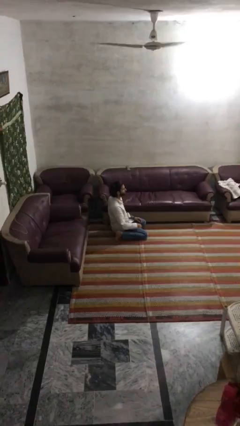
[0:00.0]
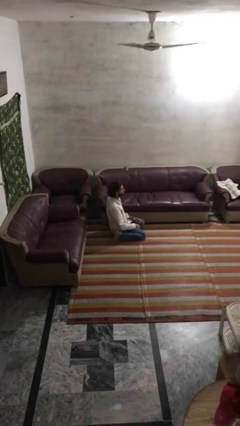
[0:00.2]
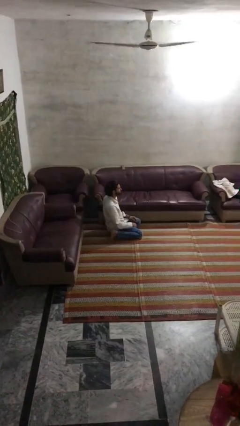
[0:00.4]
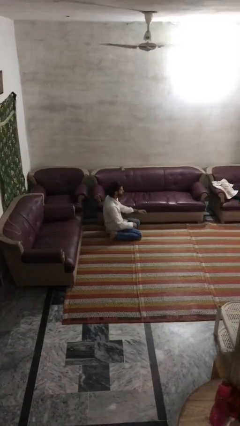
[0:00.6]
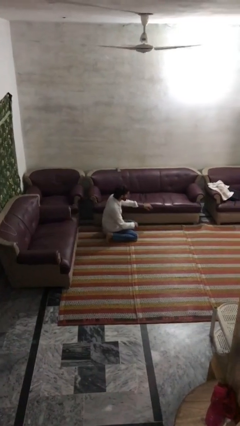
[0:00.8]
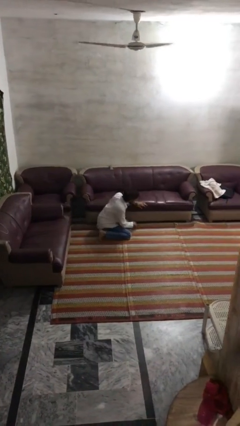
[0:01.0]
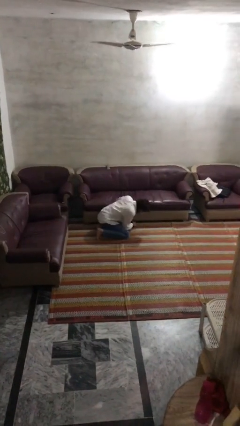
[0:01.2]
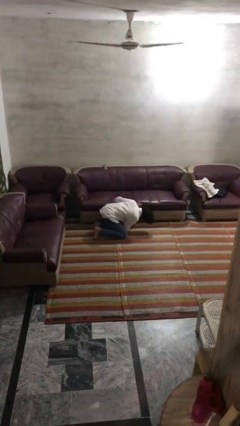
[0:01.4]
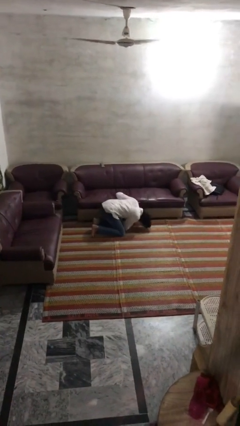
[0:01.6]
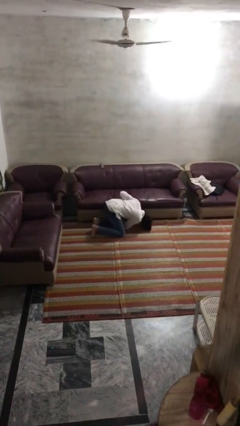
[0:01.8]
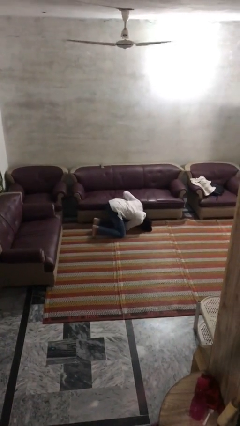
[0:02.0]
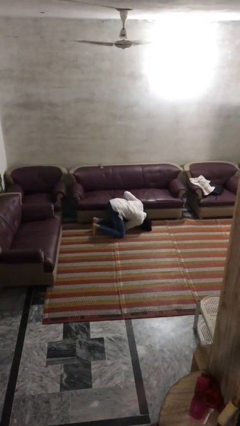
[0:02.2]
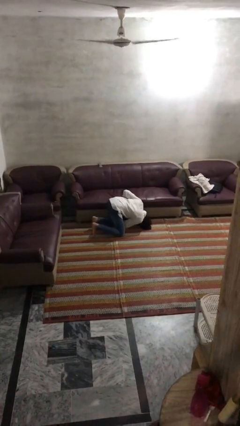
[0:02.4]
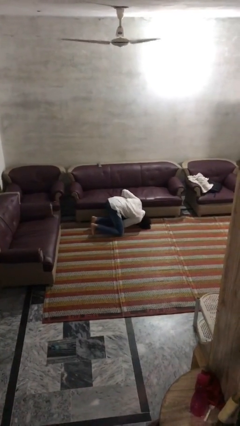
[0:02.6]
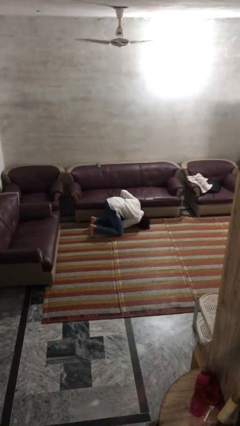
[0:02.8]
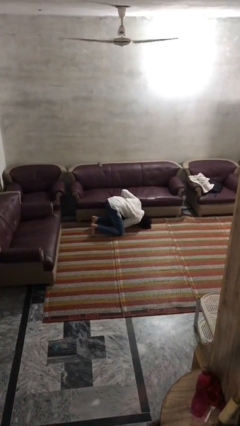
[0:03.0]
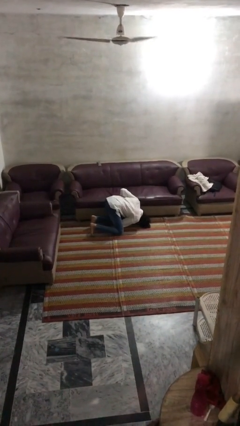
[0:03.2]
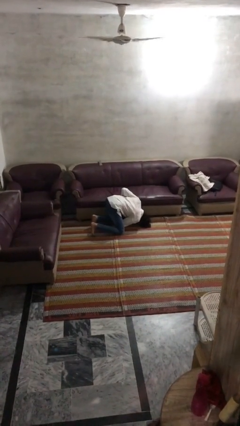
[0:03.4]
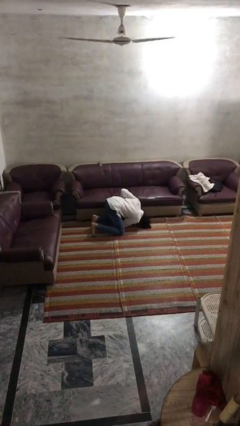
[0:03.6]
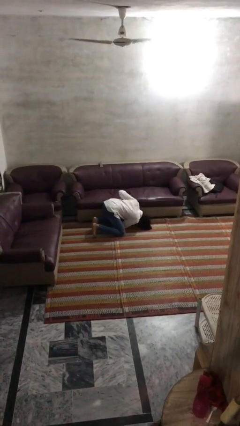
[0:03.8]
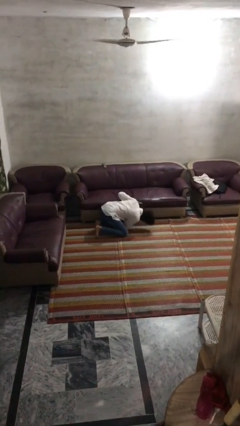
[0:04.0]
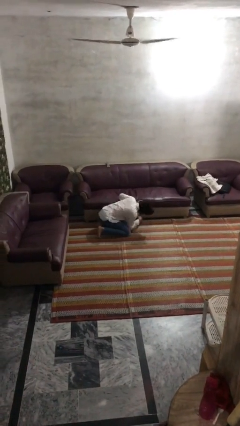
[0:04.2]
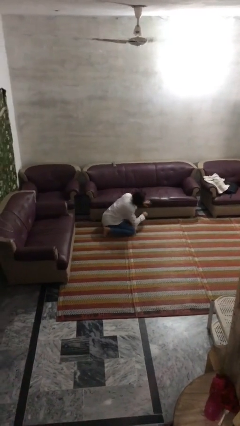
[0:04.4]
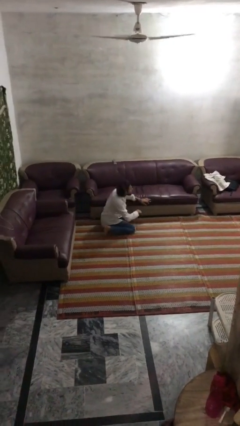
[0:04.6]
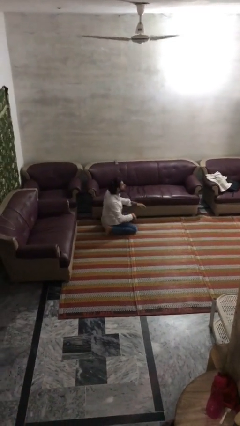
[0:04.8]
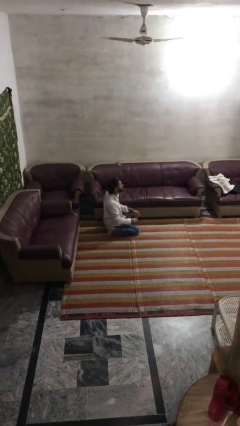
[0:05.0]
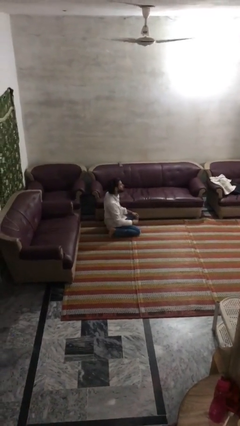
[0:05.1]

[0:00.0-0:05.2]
person searches under couch

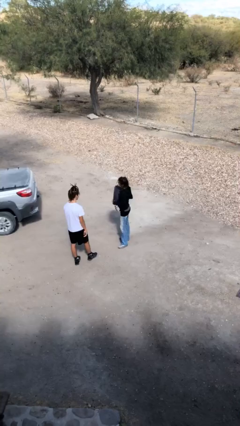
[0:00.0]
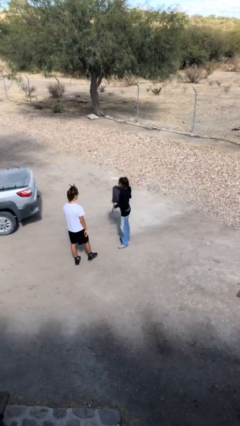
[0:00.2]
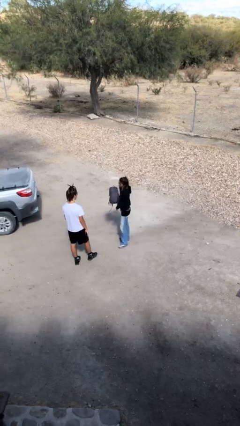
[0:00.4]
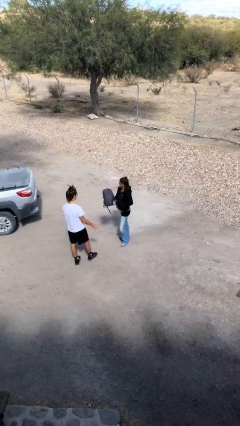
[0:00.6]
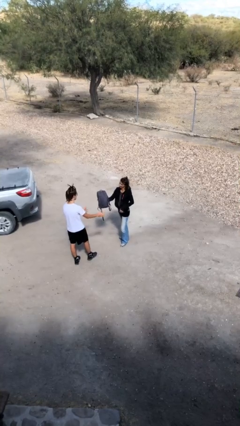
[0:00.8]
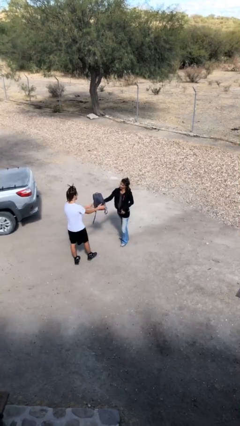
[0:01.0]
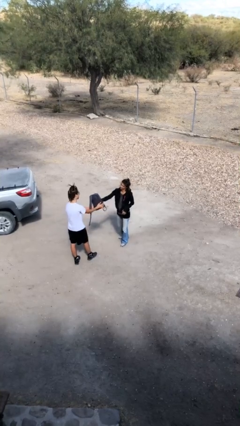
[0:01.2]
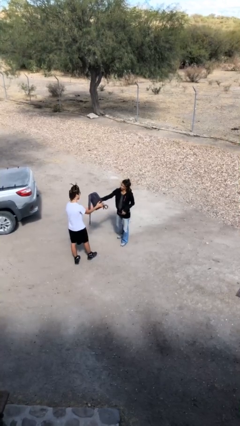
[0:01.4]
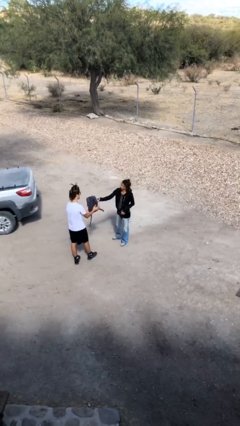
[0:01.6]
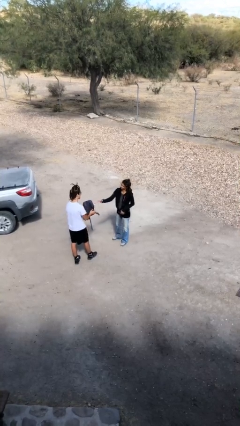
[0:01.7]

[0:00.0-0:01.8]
person transfers object to person

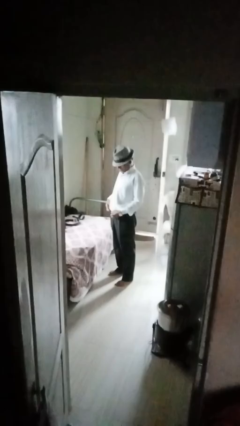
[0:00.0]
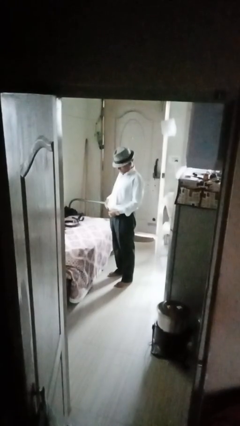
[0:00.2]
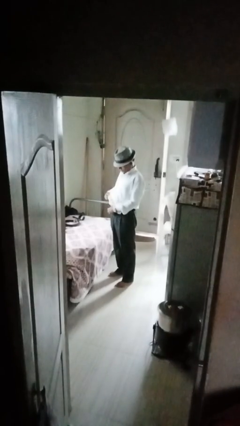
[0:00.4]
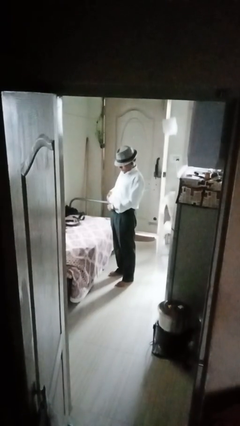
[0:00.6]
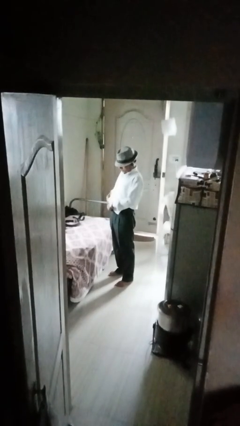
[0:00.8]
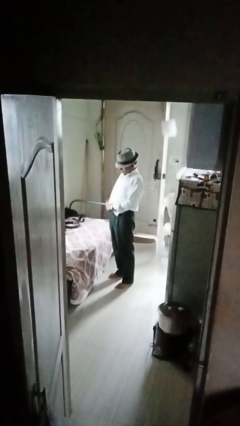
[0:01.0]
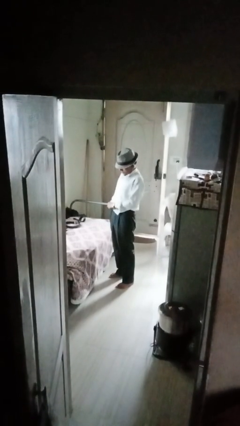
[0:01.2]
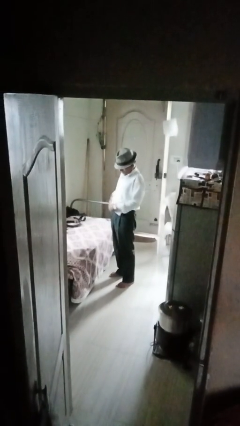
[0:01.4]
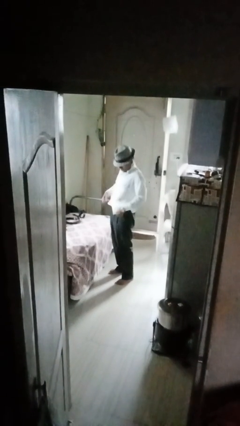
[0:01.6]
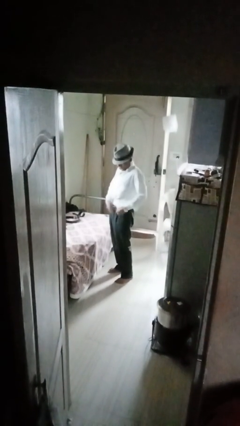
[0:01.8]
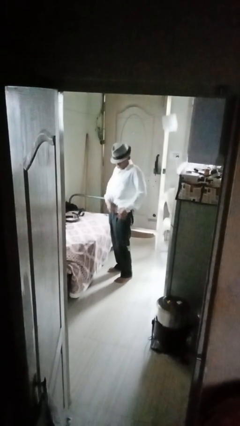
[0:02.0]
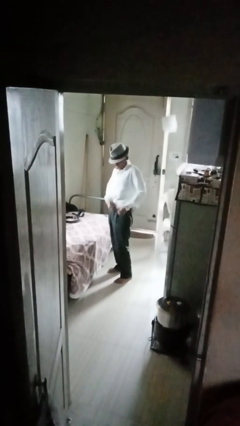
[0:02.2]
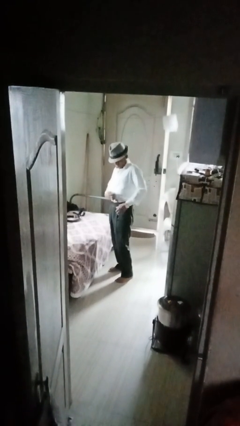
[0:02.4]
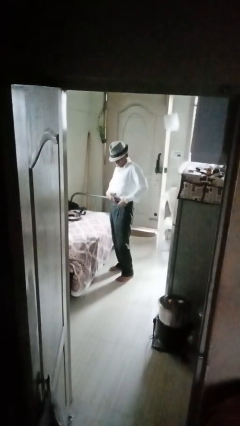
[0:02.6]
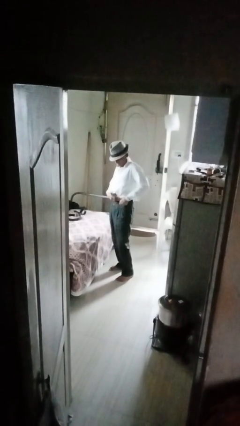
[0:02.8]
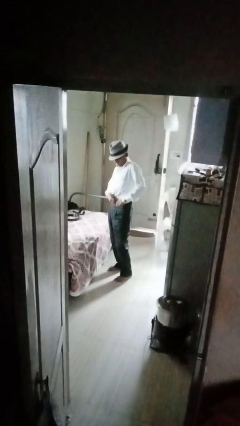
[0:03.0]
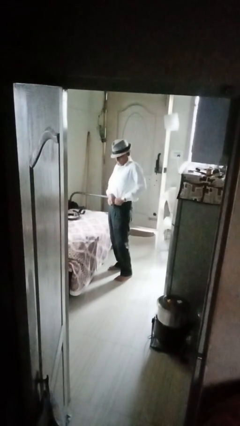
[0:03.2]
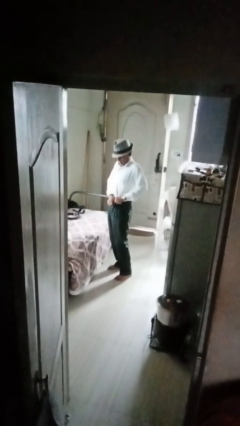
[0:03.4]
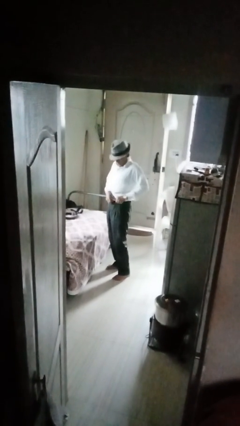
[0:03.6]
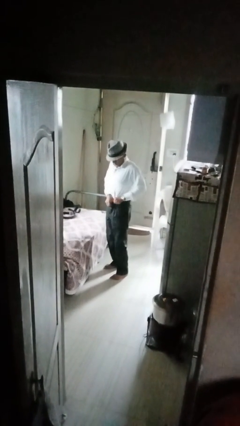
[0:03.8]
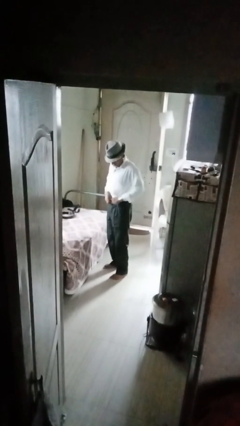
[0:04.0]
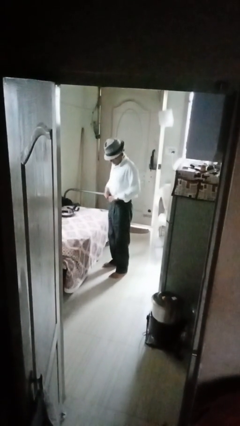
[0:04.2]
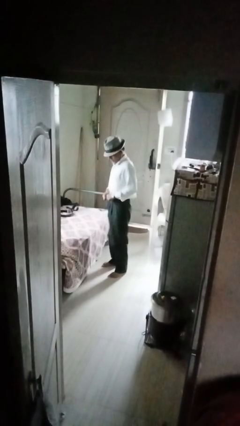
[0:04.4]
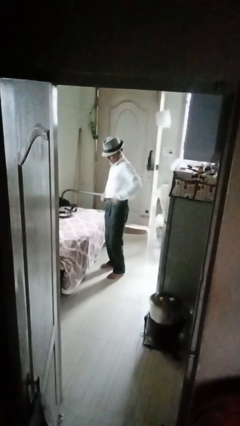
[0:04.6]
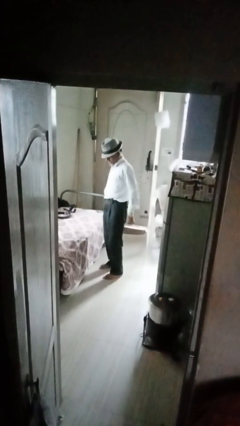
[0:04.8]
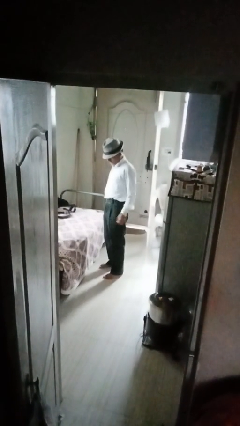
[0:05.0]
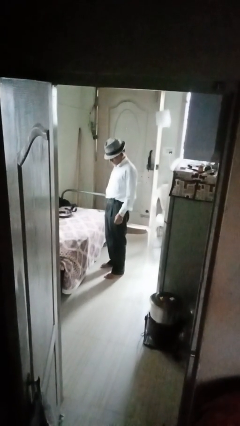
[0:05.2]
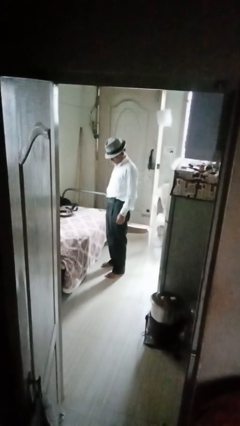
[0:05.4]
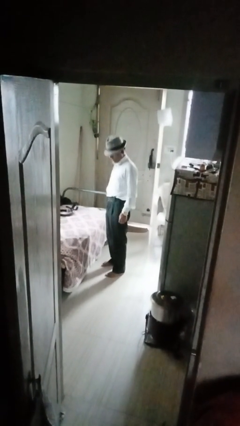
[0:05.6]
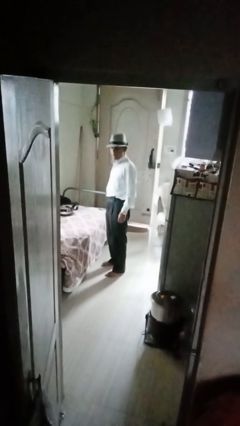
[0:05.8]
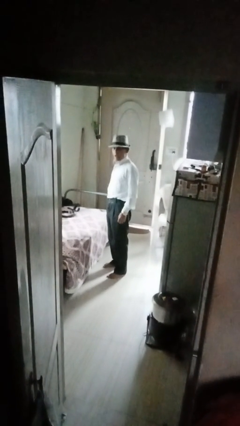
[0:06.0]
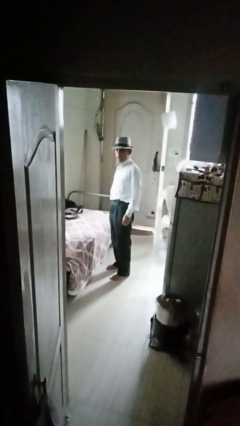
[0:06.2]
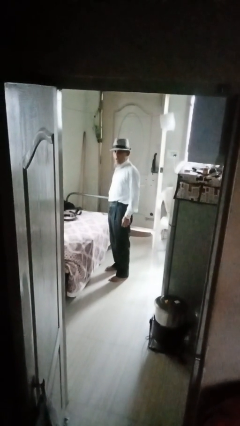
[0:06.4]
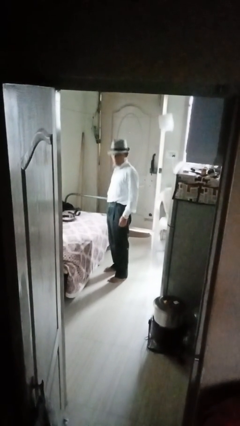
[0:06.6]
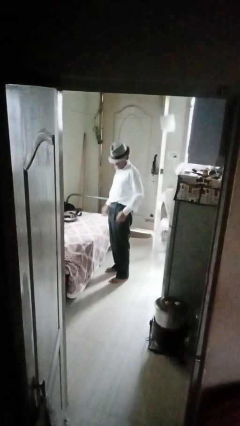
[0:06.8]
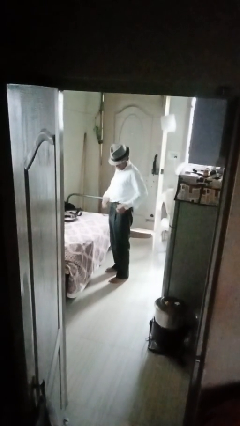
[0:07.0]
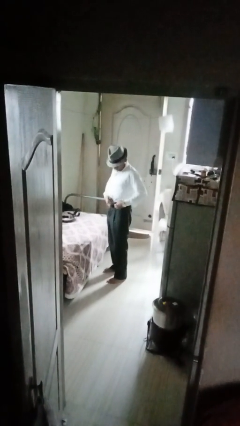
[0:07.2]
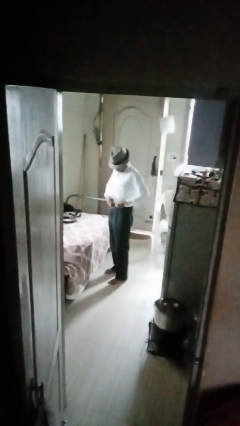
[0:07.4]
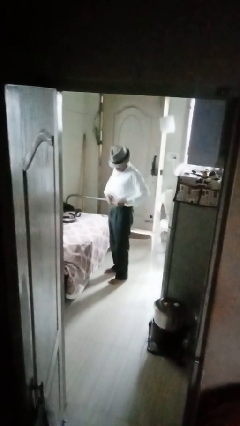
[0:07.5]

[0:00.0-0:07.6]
person tucks in shirt

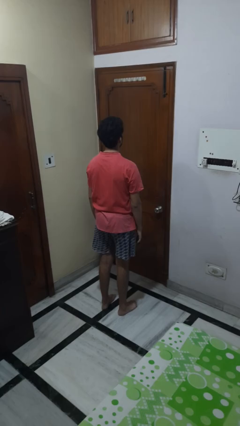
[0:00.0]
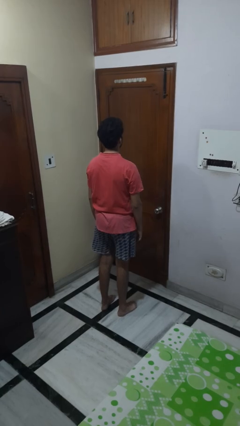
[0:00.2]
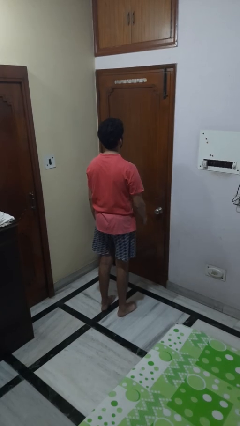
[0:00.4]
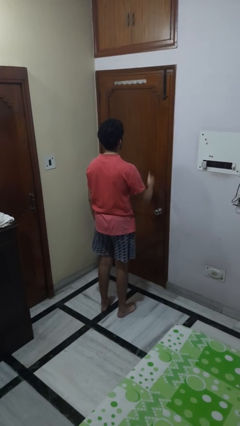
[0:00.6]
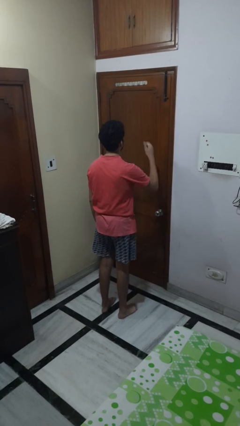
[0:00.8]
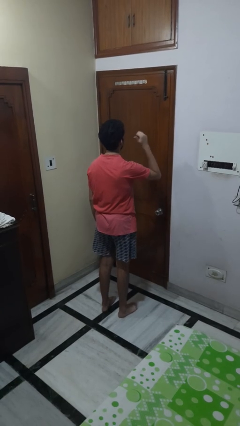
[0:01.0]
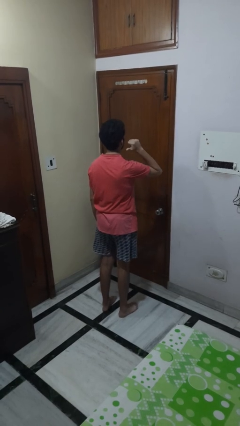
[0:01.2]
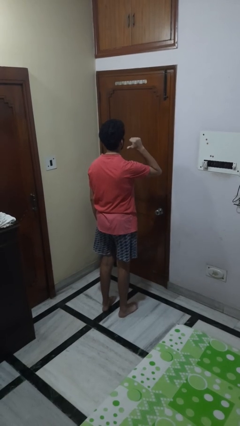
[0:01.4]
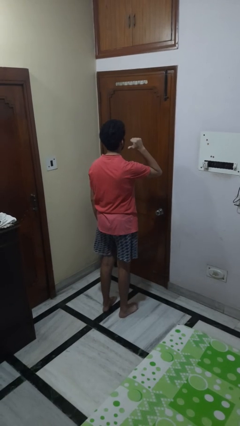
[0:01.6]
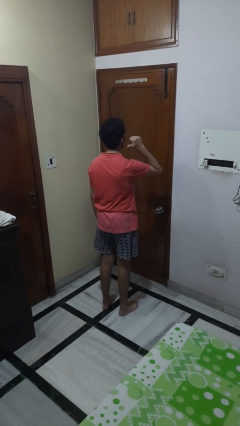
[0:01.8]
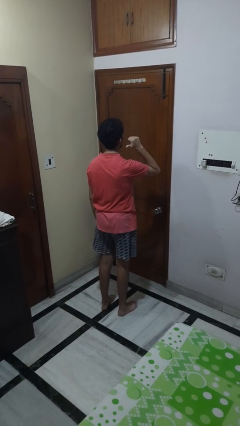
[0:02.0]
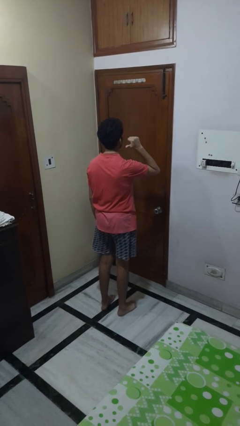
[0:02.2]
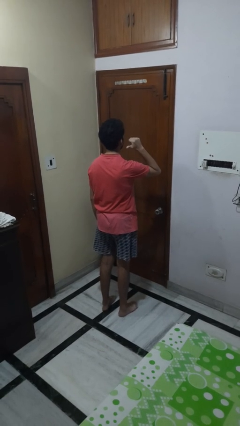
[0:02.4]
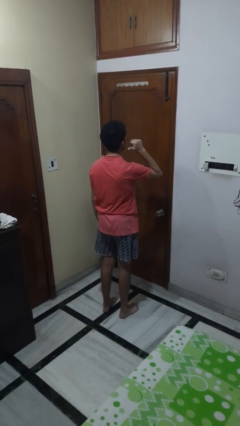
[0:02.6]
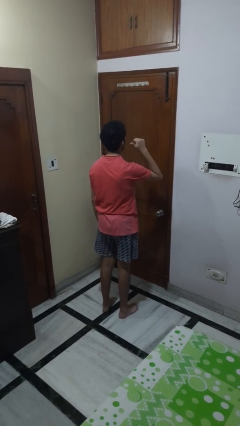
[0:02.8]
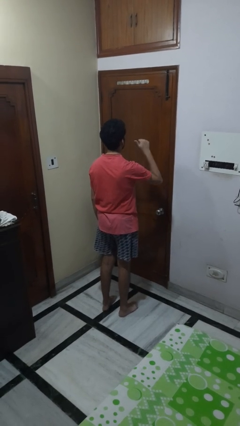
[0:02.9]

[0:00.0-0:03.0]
person gestures behind me
